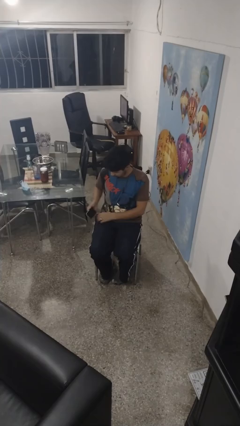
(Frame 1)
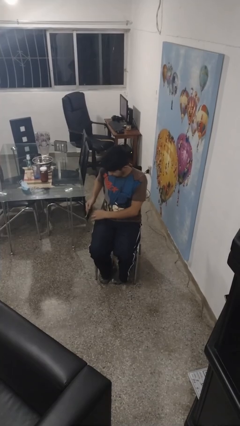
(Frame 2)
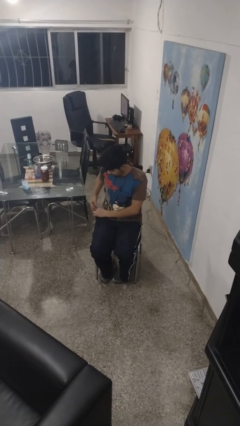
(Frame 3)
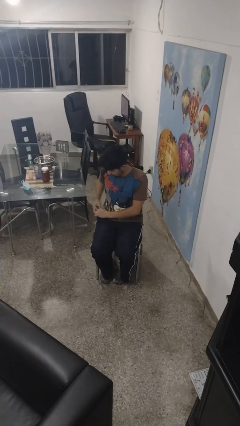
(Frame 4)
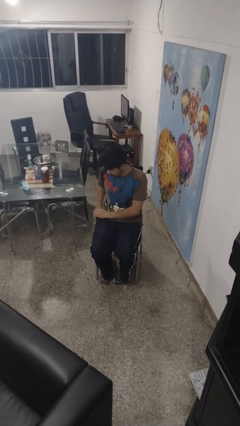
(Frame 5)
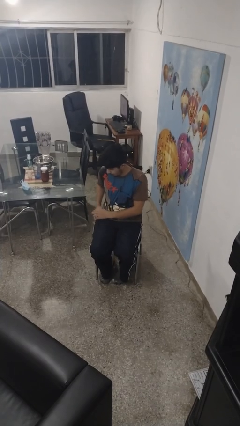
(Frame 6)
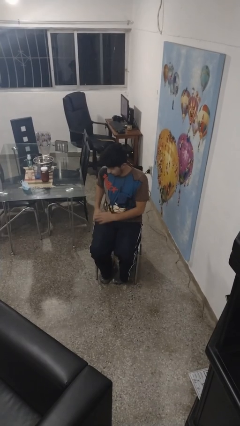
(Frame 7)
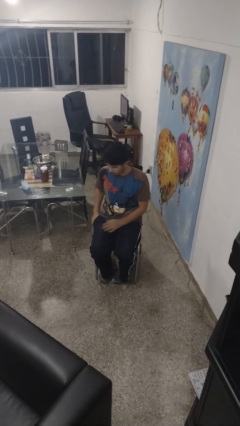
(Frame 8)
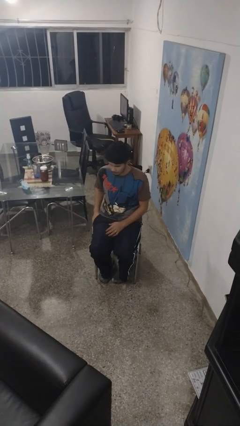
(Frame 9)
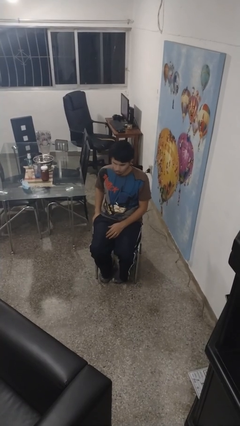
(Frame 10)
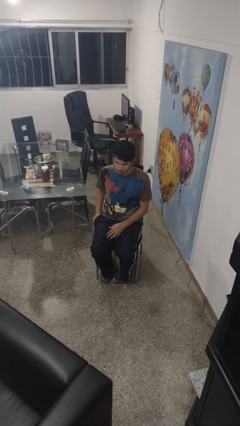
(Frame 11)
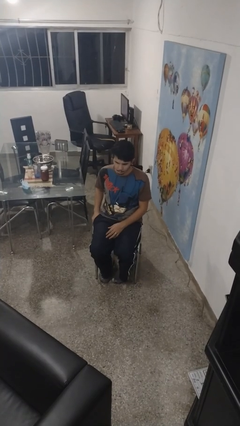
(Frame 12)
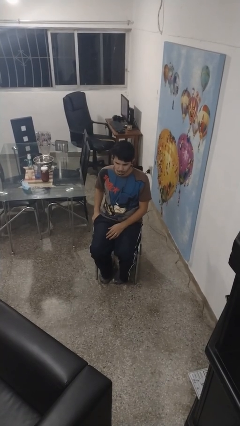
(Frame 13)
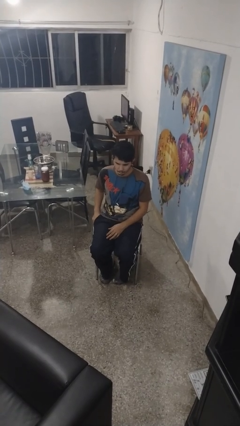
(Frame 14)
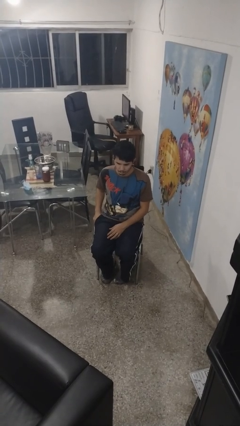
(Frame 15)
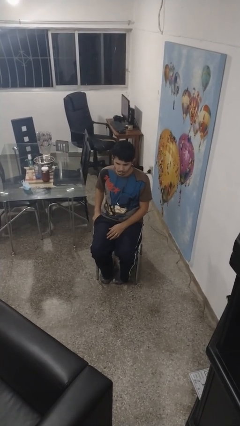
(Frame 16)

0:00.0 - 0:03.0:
person puts phone into pocket

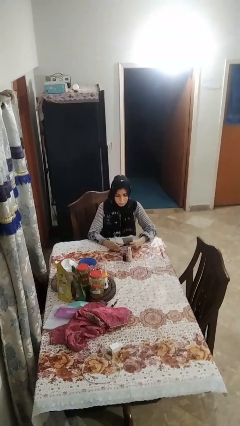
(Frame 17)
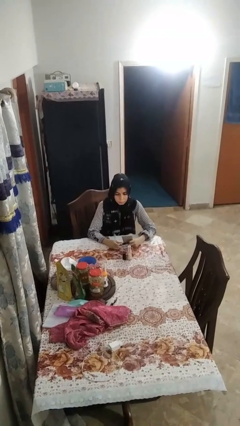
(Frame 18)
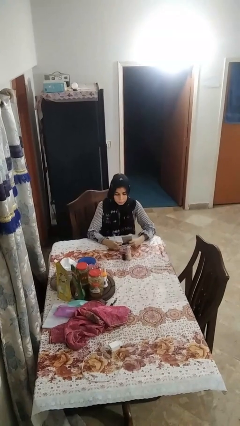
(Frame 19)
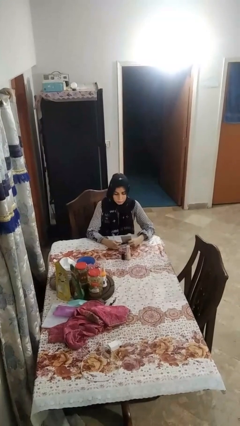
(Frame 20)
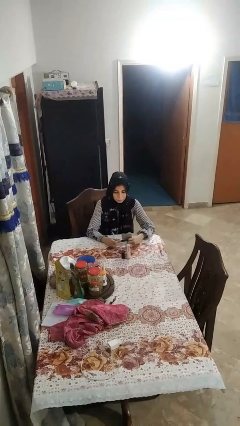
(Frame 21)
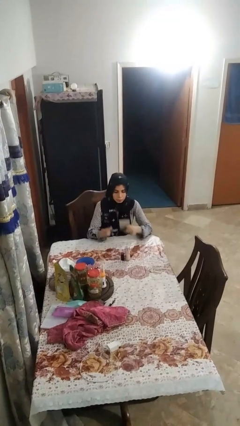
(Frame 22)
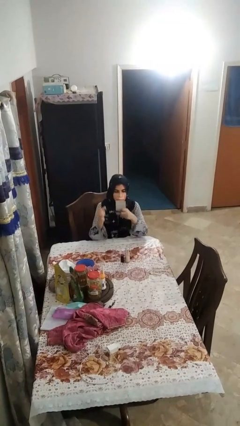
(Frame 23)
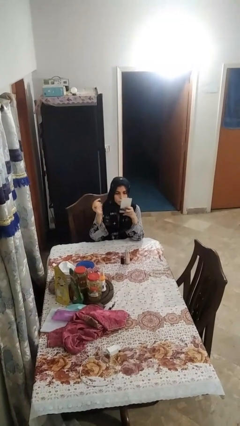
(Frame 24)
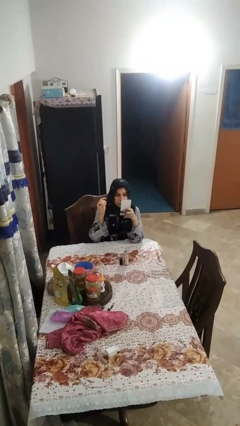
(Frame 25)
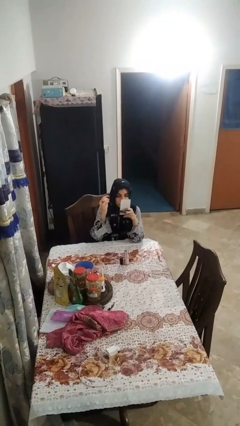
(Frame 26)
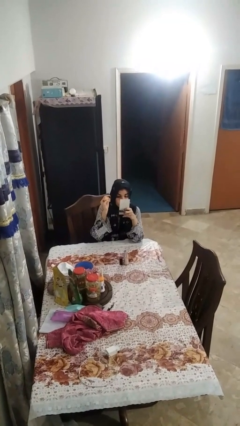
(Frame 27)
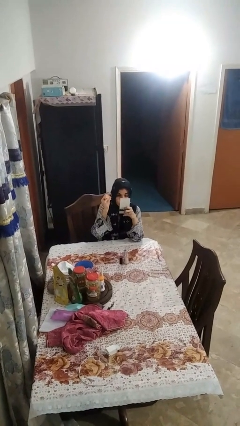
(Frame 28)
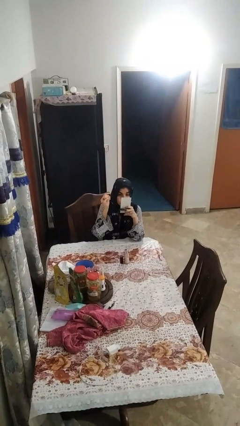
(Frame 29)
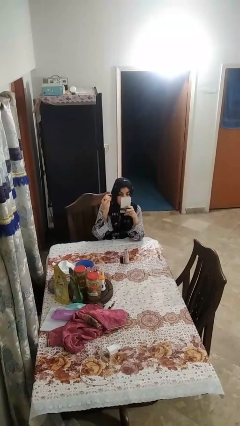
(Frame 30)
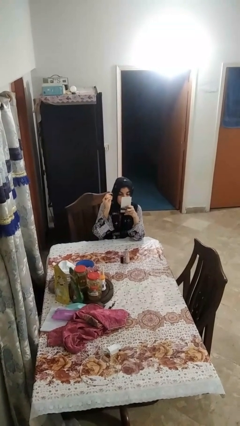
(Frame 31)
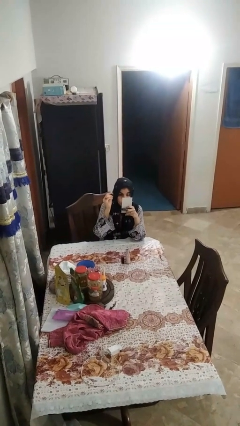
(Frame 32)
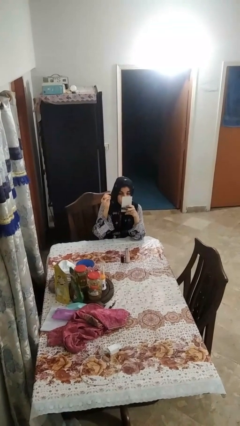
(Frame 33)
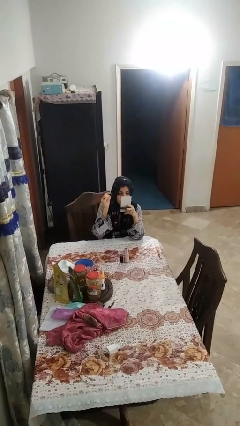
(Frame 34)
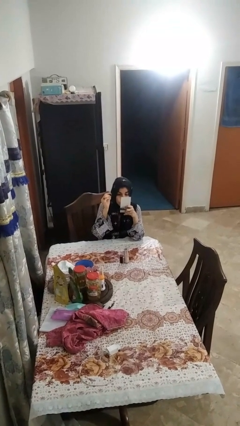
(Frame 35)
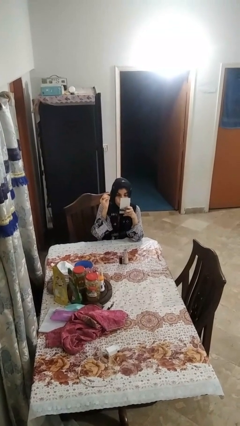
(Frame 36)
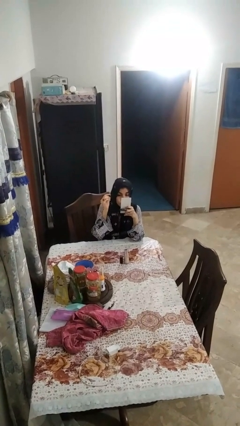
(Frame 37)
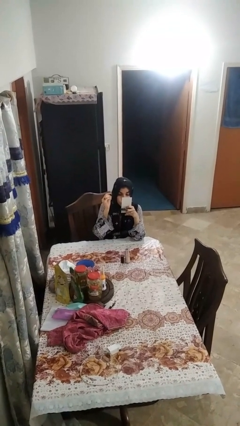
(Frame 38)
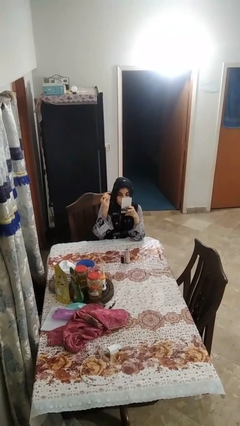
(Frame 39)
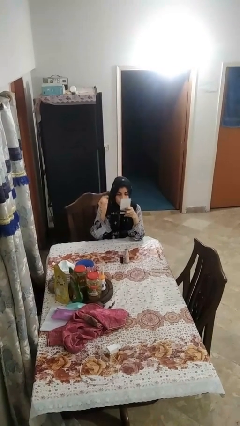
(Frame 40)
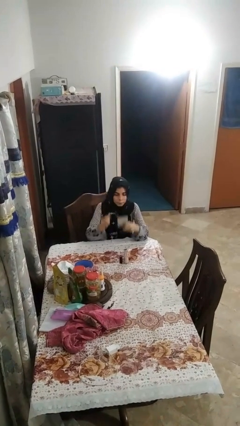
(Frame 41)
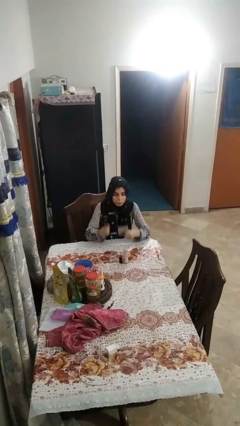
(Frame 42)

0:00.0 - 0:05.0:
person applies eye makeup

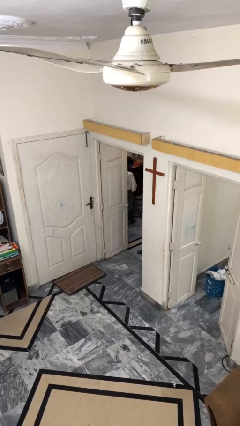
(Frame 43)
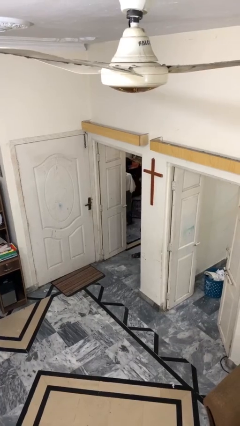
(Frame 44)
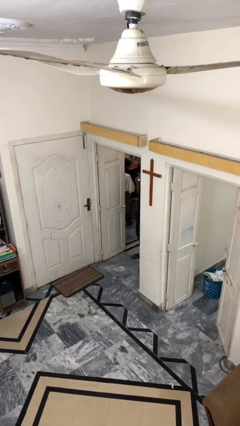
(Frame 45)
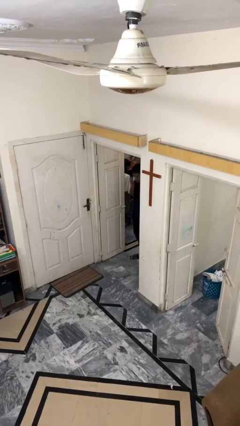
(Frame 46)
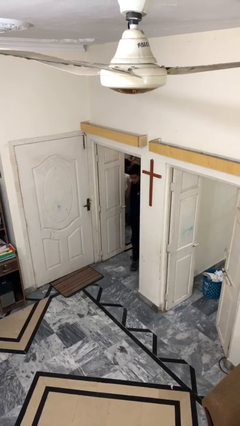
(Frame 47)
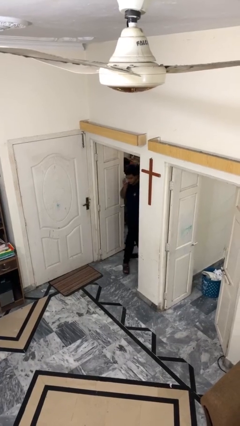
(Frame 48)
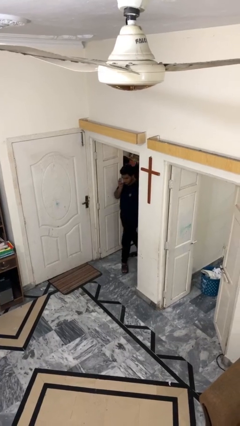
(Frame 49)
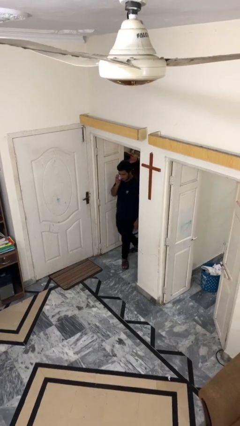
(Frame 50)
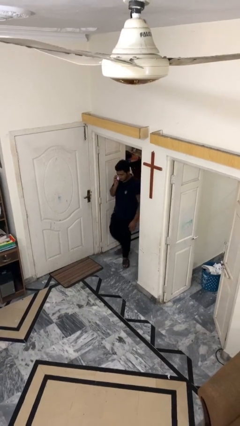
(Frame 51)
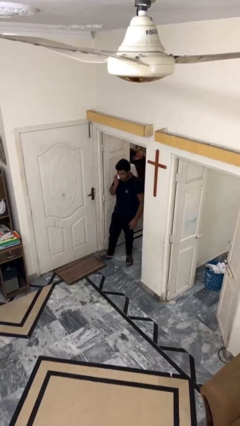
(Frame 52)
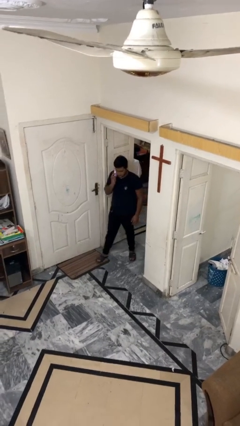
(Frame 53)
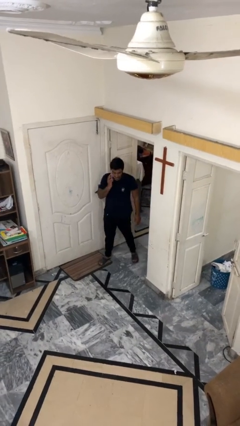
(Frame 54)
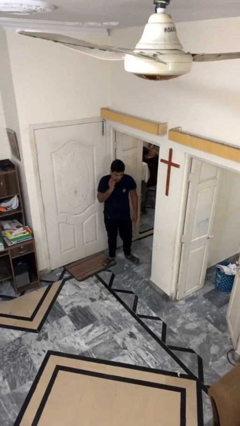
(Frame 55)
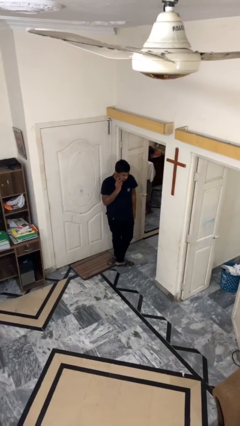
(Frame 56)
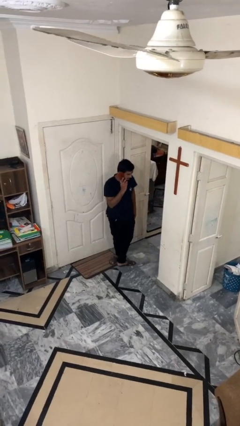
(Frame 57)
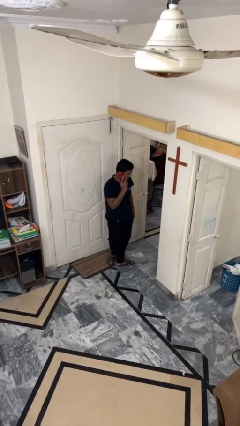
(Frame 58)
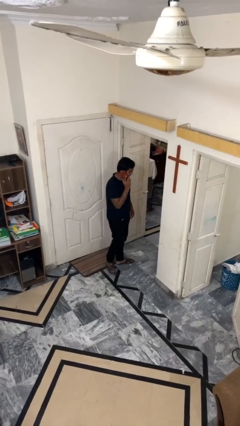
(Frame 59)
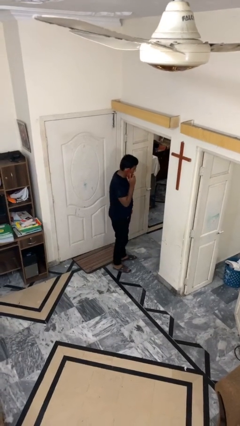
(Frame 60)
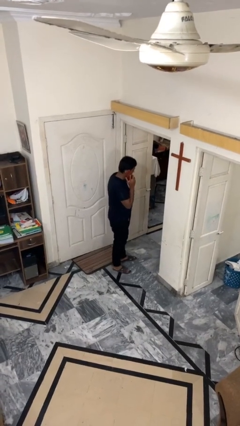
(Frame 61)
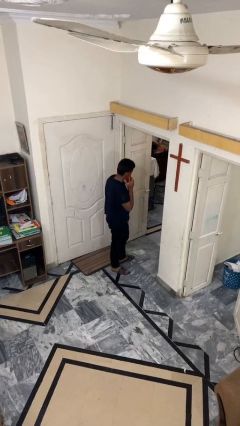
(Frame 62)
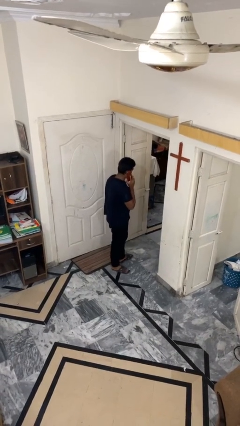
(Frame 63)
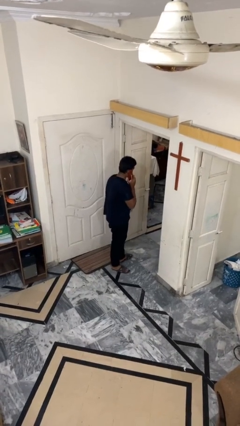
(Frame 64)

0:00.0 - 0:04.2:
person enters scene through structure

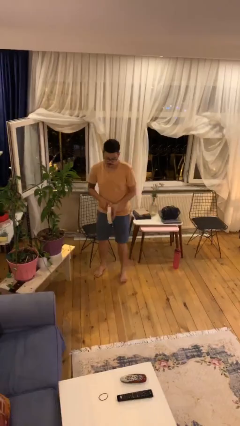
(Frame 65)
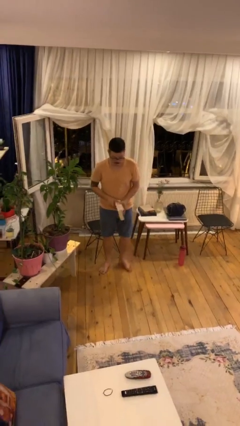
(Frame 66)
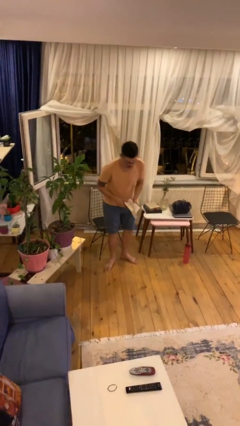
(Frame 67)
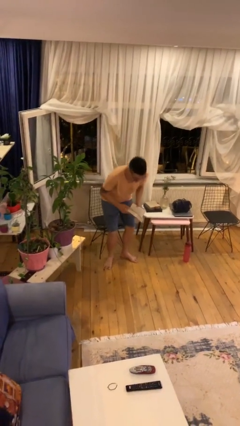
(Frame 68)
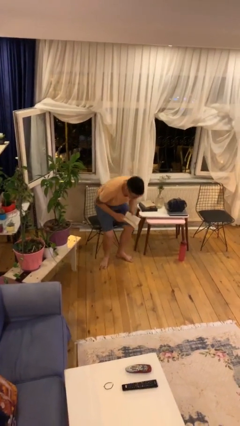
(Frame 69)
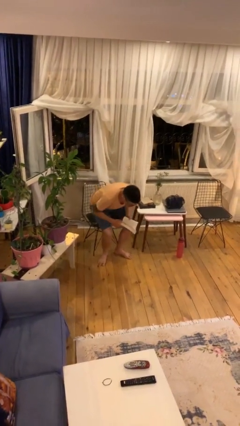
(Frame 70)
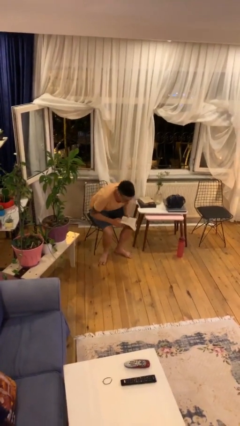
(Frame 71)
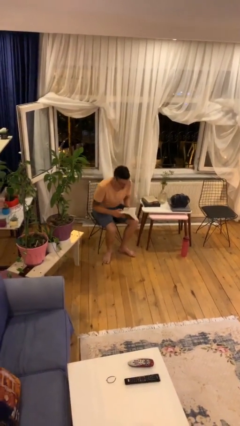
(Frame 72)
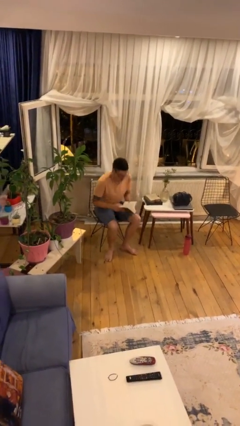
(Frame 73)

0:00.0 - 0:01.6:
person sits down

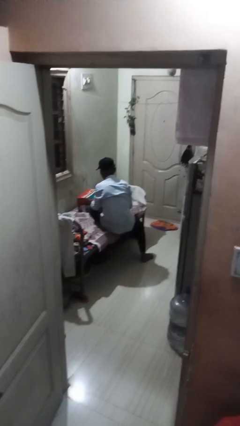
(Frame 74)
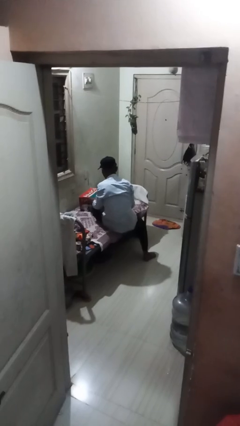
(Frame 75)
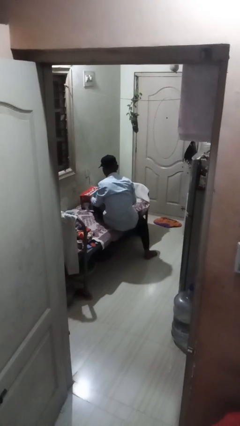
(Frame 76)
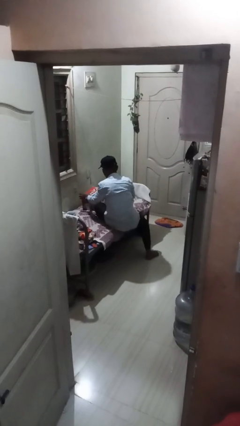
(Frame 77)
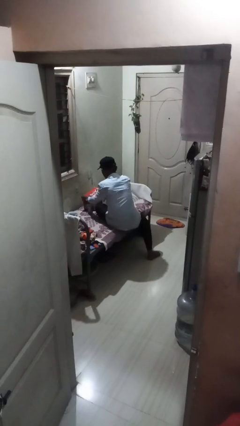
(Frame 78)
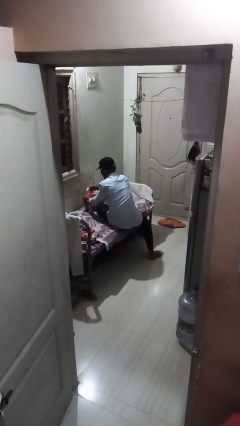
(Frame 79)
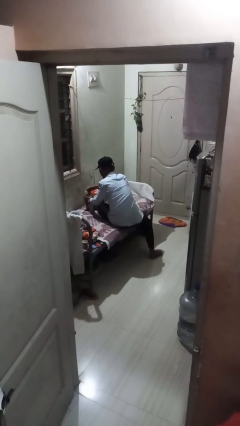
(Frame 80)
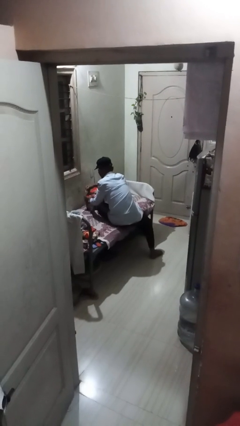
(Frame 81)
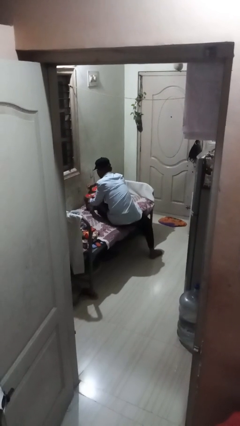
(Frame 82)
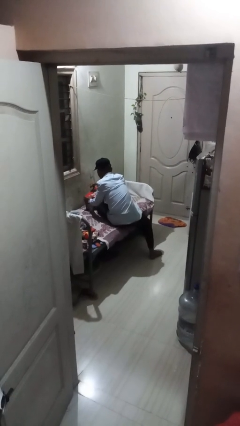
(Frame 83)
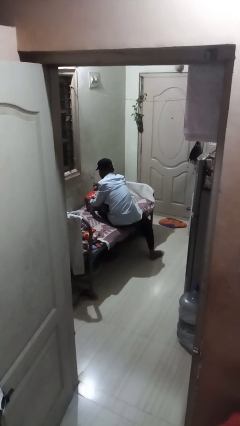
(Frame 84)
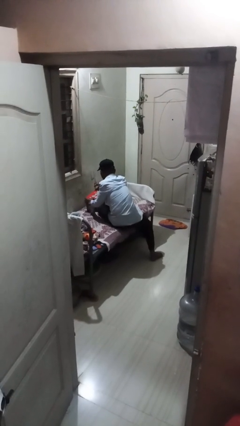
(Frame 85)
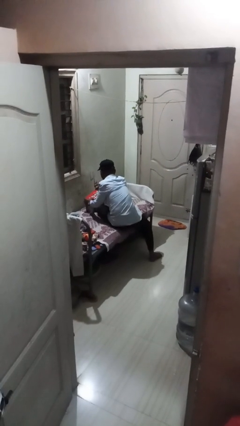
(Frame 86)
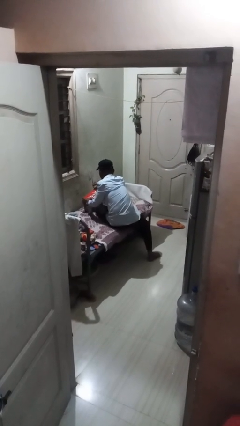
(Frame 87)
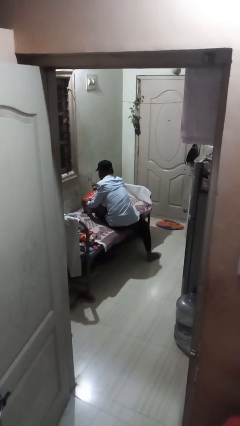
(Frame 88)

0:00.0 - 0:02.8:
person wraps box

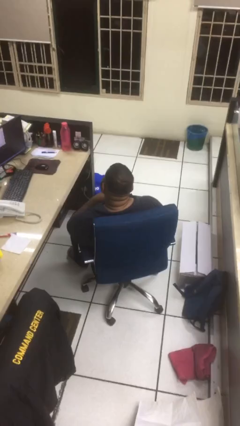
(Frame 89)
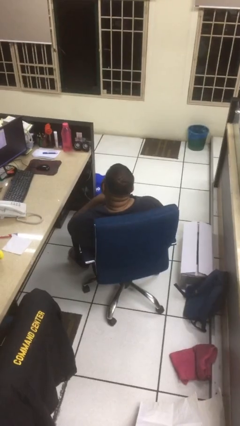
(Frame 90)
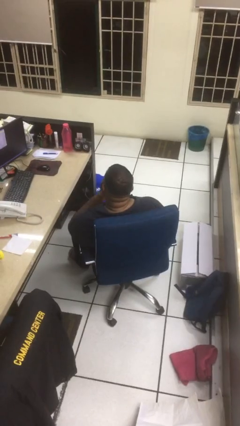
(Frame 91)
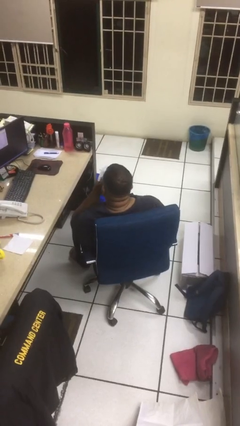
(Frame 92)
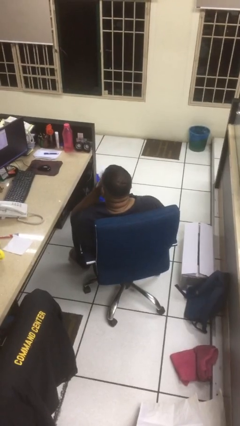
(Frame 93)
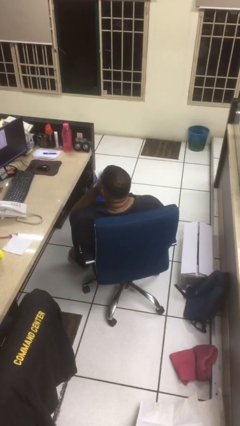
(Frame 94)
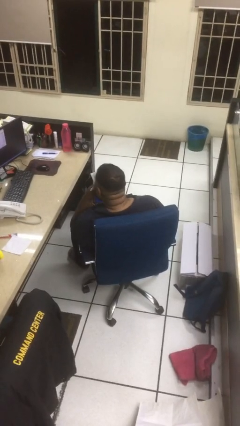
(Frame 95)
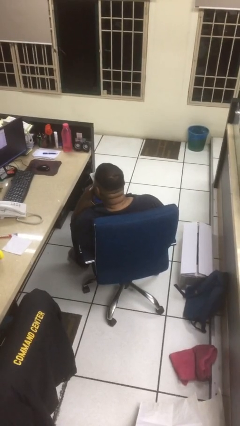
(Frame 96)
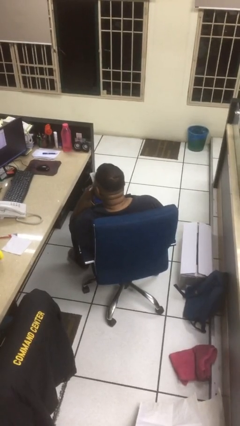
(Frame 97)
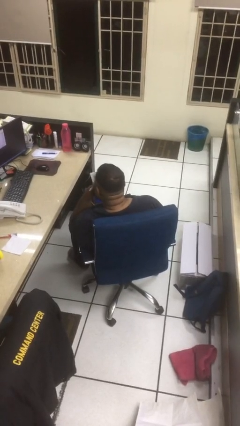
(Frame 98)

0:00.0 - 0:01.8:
person blows nose
